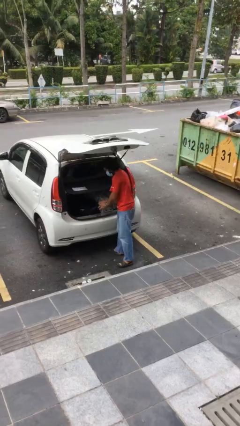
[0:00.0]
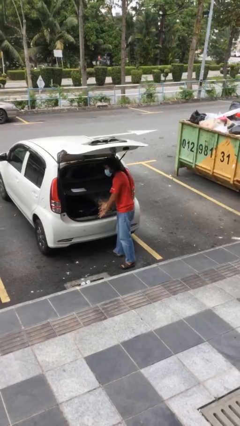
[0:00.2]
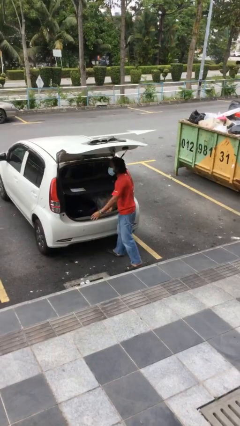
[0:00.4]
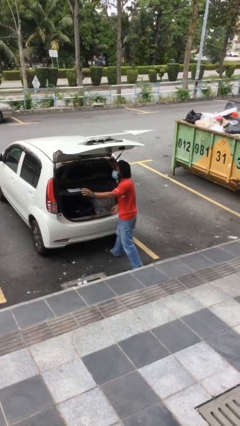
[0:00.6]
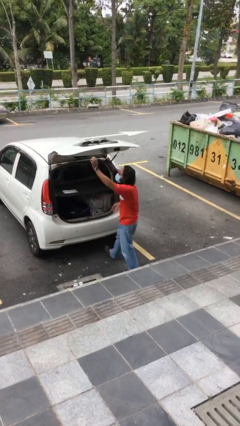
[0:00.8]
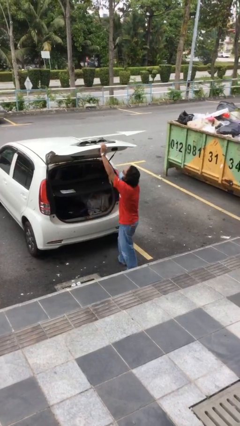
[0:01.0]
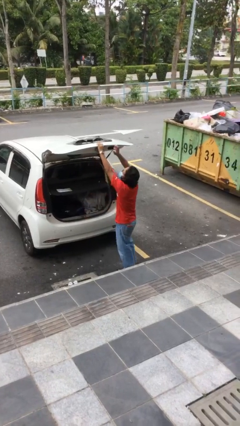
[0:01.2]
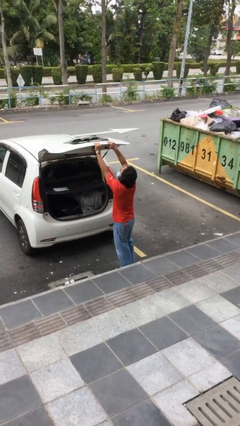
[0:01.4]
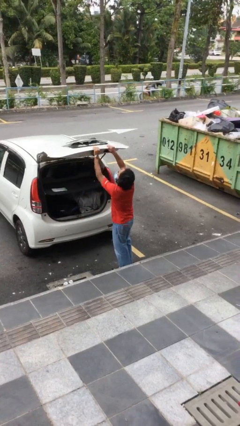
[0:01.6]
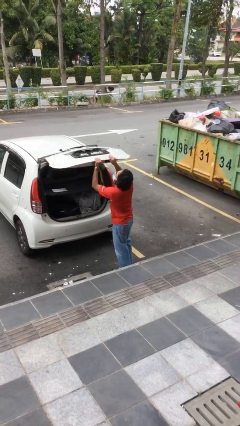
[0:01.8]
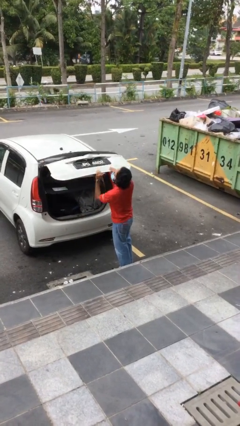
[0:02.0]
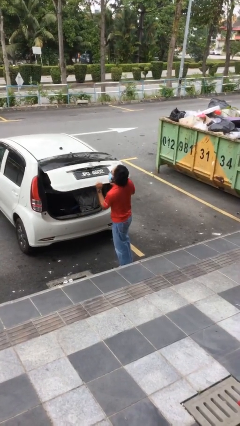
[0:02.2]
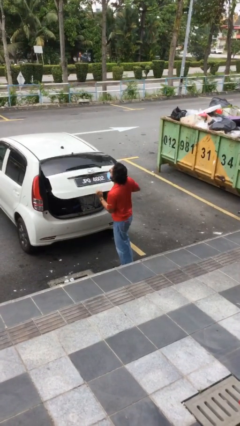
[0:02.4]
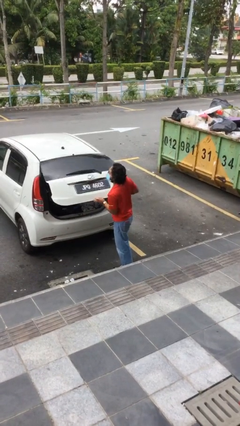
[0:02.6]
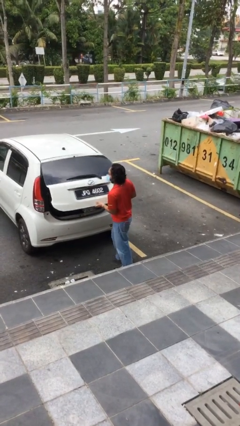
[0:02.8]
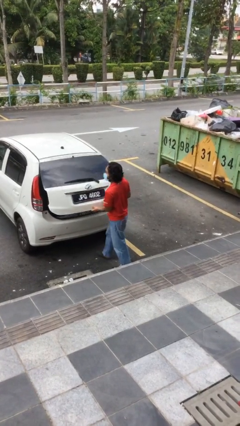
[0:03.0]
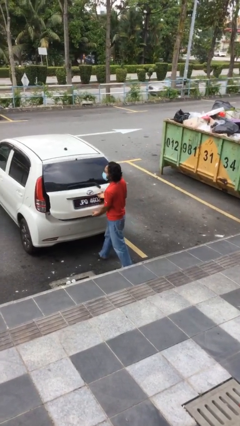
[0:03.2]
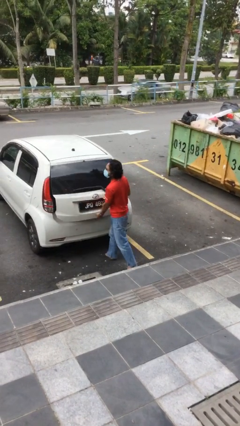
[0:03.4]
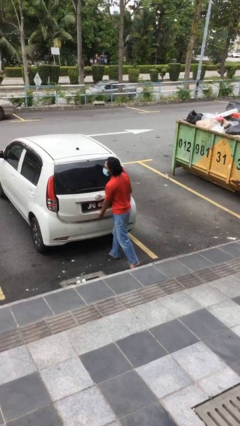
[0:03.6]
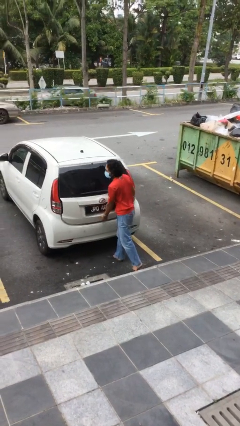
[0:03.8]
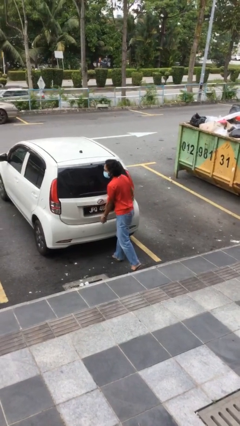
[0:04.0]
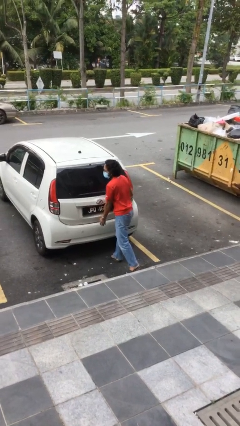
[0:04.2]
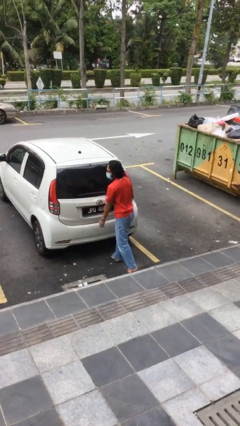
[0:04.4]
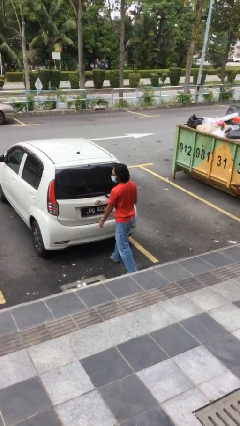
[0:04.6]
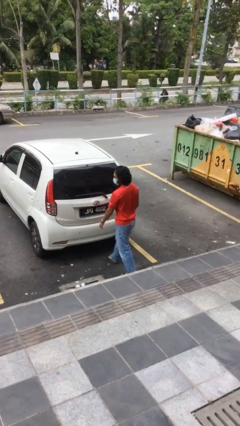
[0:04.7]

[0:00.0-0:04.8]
person closes car trunk

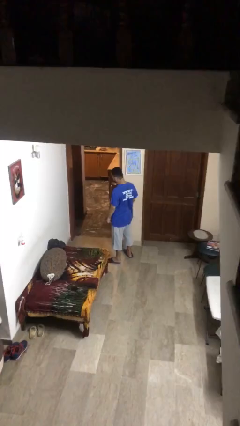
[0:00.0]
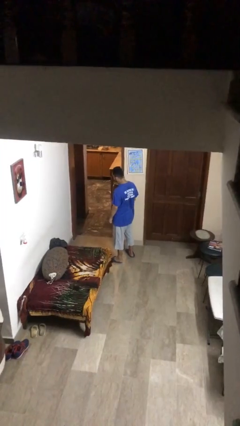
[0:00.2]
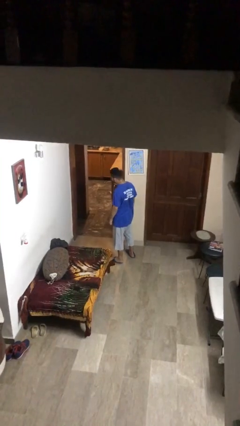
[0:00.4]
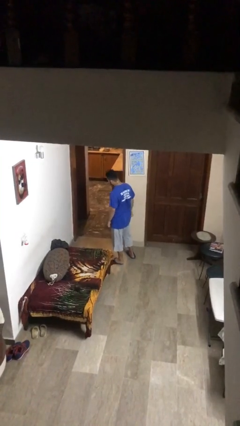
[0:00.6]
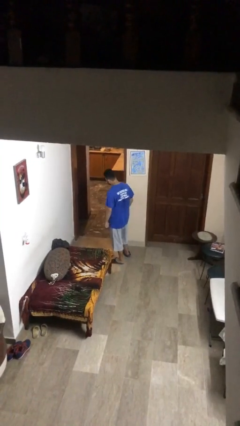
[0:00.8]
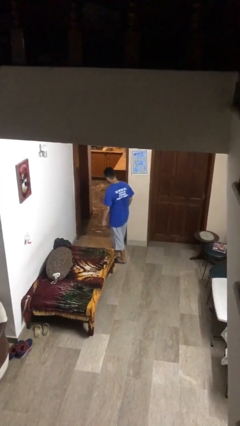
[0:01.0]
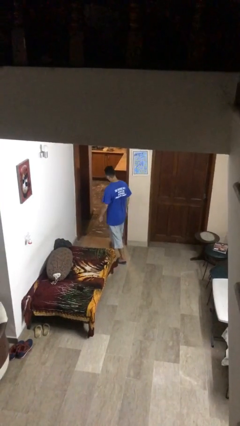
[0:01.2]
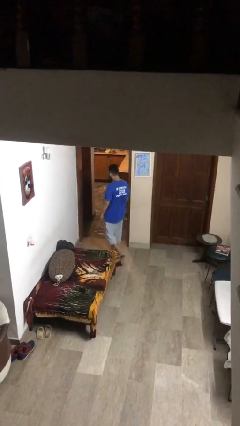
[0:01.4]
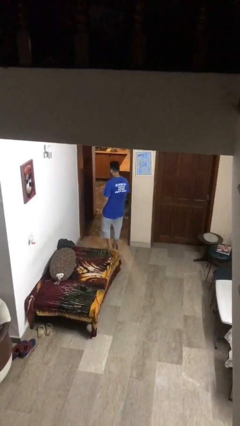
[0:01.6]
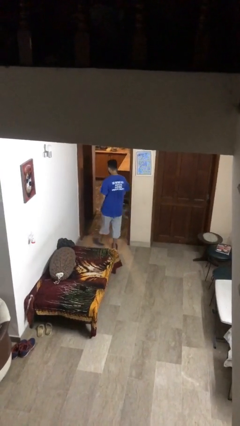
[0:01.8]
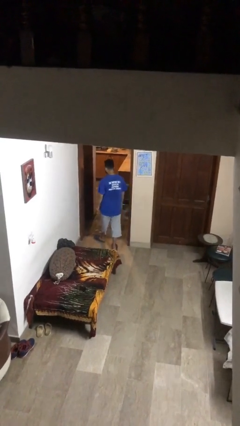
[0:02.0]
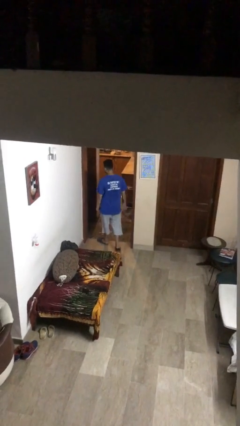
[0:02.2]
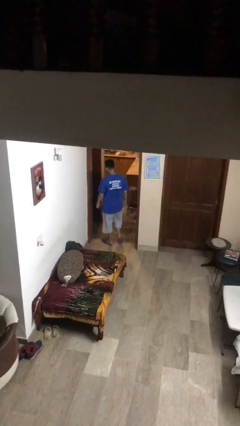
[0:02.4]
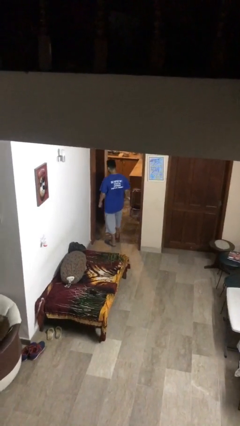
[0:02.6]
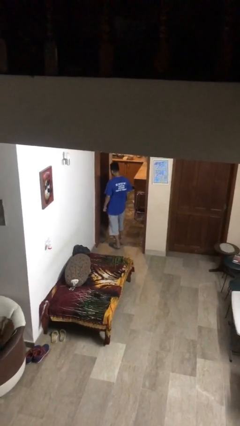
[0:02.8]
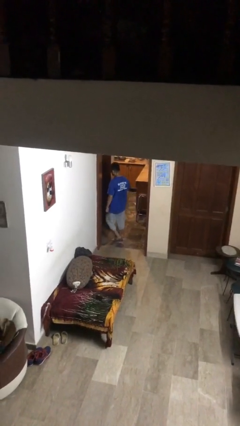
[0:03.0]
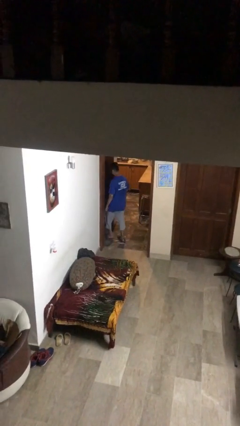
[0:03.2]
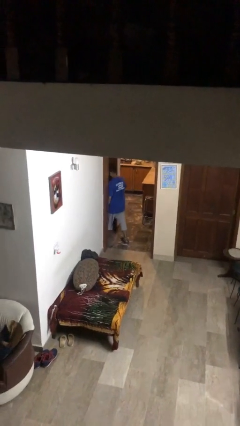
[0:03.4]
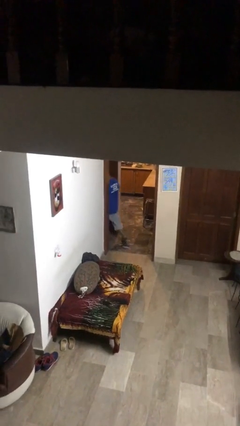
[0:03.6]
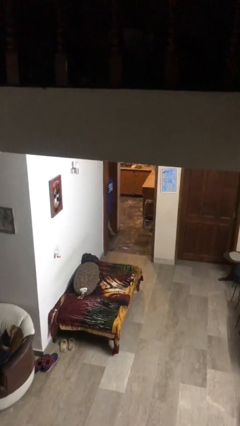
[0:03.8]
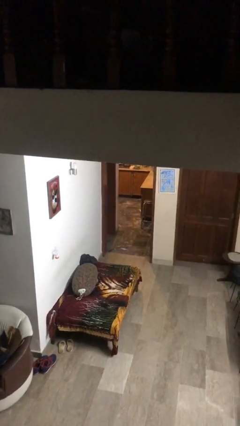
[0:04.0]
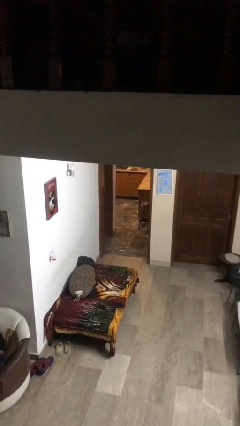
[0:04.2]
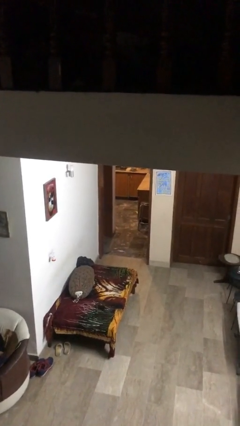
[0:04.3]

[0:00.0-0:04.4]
person exits scene through structure

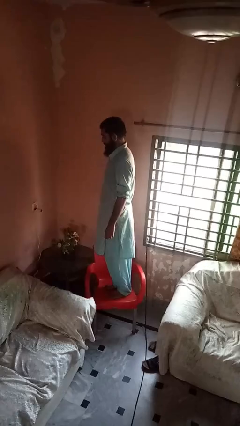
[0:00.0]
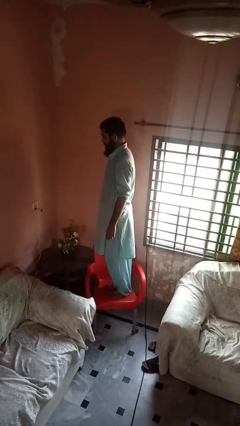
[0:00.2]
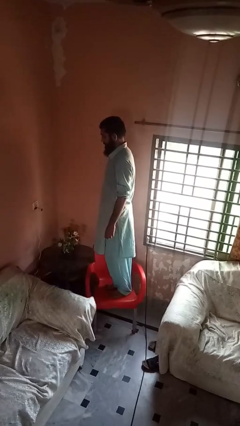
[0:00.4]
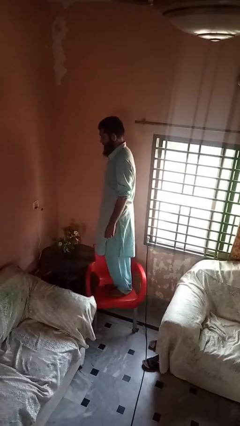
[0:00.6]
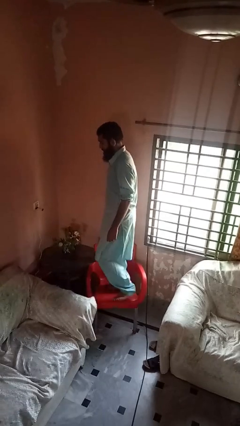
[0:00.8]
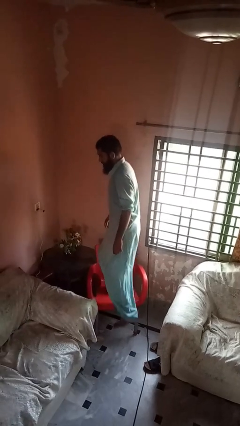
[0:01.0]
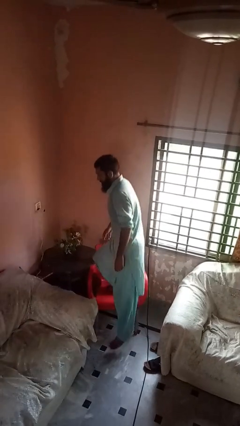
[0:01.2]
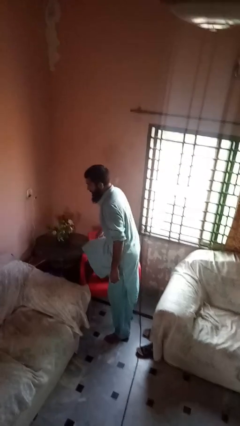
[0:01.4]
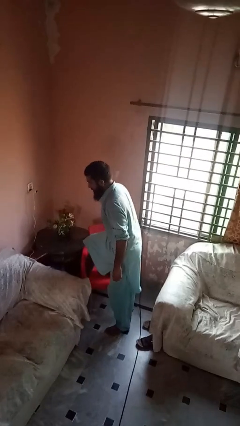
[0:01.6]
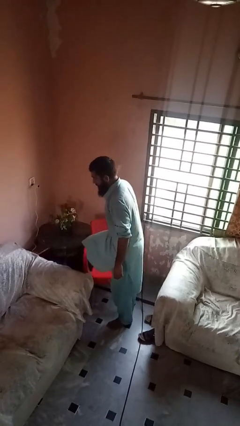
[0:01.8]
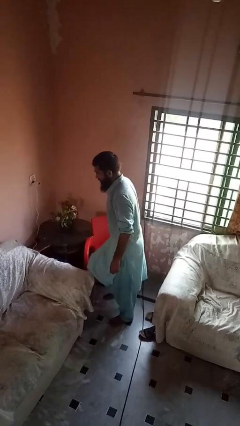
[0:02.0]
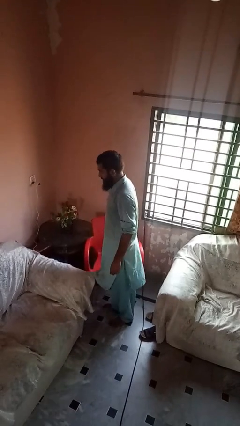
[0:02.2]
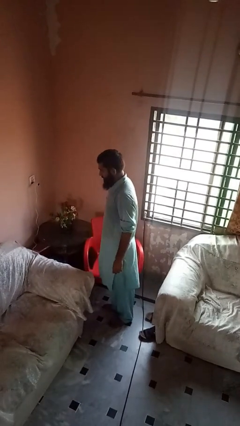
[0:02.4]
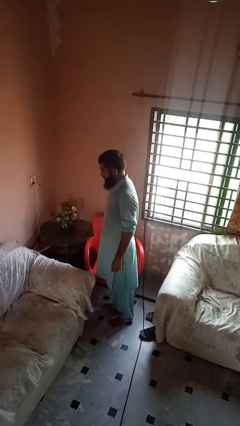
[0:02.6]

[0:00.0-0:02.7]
person climbs off chair

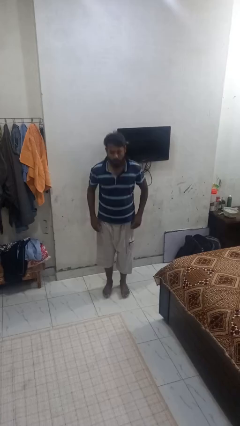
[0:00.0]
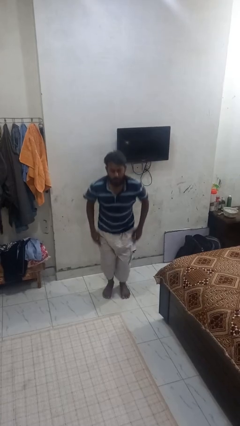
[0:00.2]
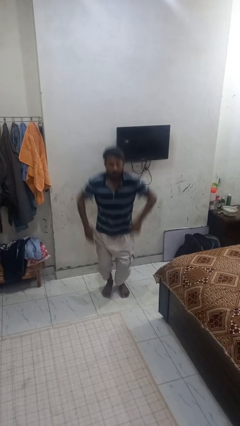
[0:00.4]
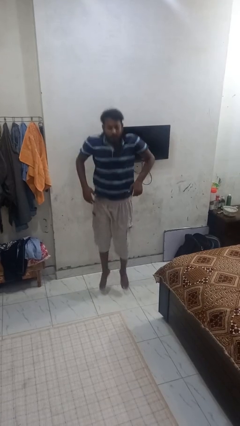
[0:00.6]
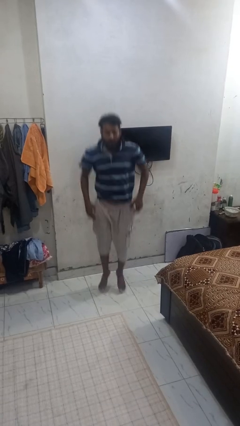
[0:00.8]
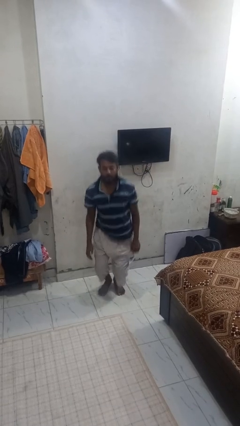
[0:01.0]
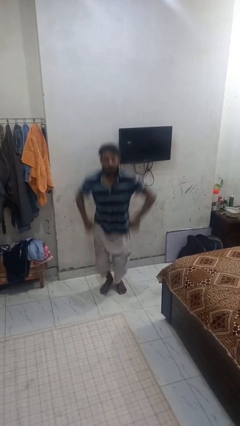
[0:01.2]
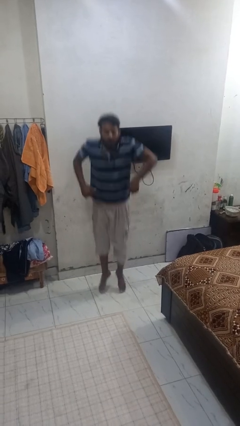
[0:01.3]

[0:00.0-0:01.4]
person jumps

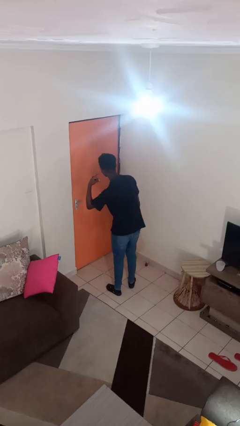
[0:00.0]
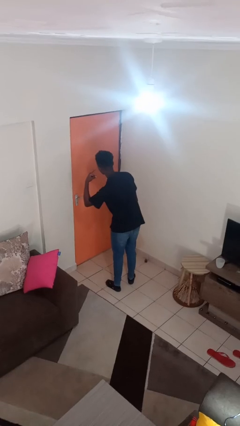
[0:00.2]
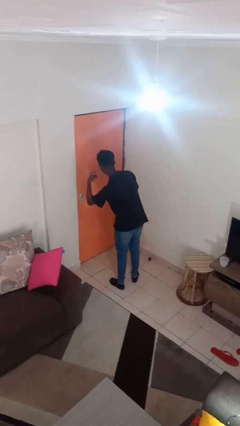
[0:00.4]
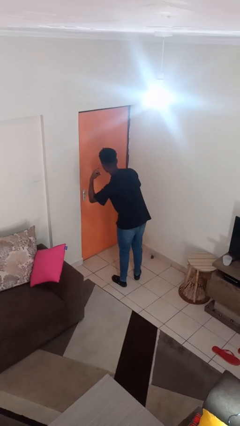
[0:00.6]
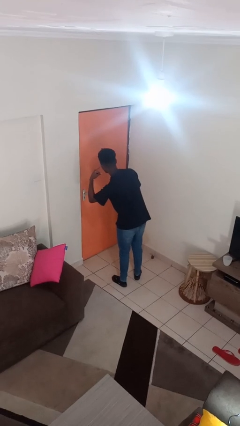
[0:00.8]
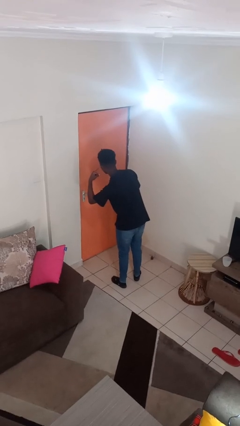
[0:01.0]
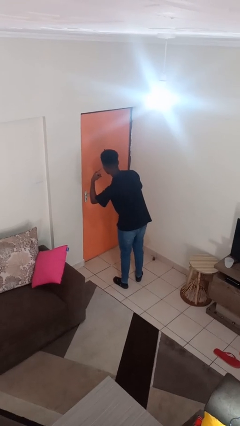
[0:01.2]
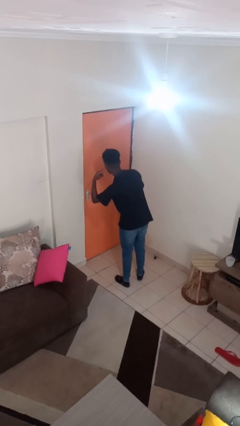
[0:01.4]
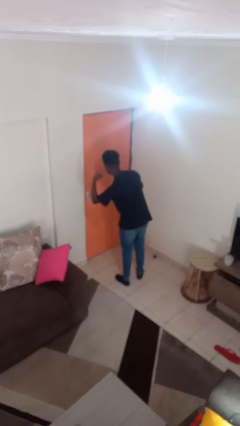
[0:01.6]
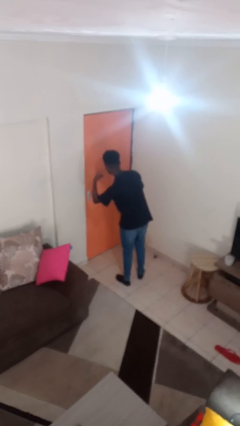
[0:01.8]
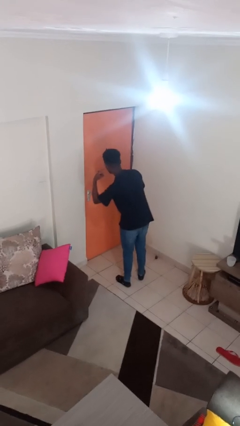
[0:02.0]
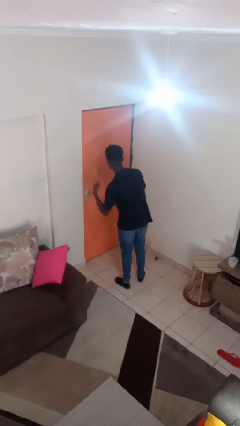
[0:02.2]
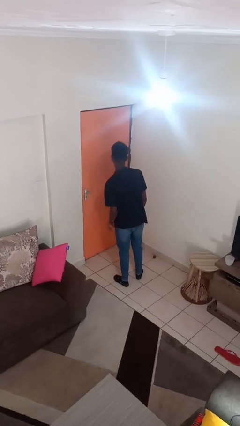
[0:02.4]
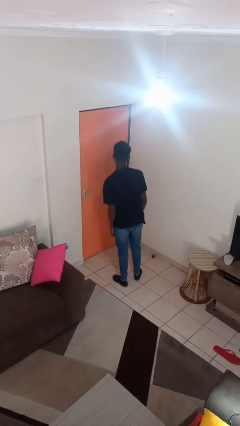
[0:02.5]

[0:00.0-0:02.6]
person gestures listen closely

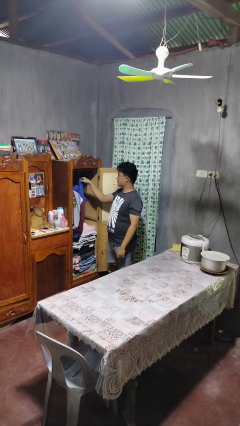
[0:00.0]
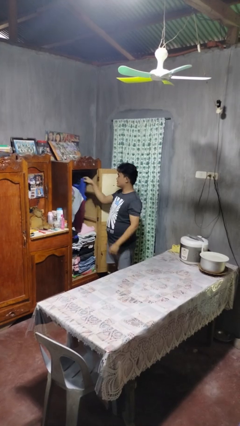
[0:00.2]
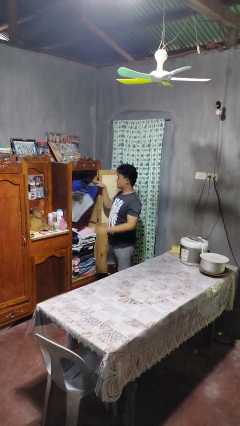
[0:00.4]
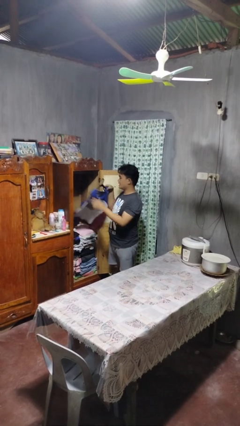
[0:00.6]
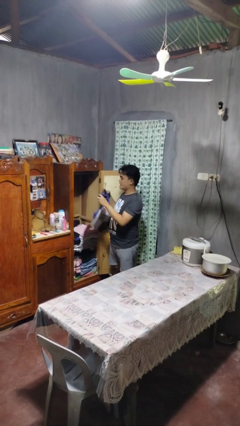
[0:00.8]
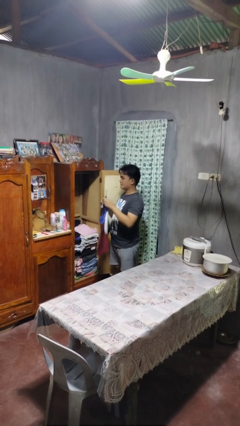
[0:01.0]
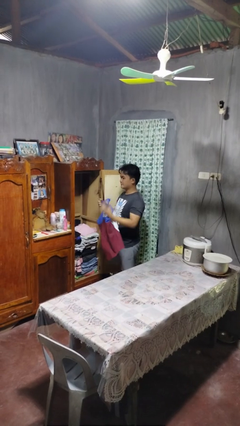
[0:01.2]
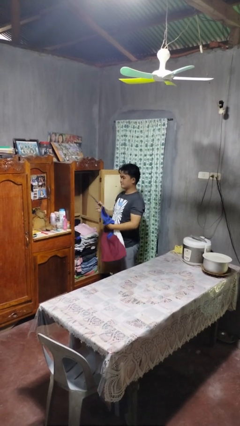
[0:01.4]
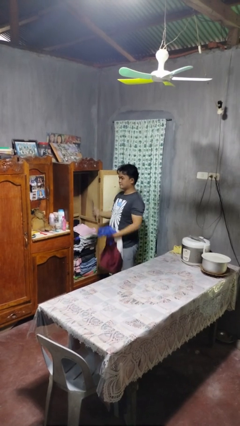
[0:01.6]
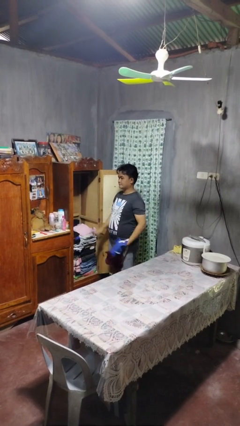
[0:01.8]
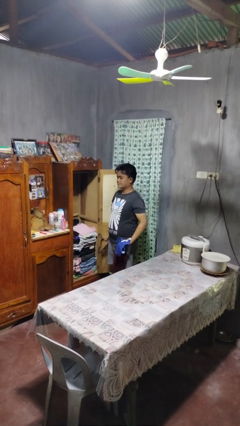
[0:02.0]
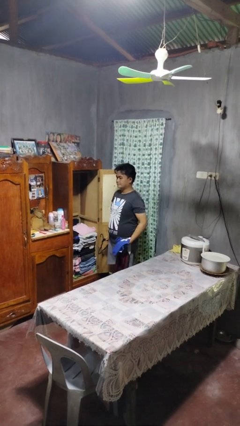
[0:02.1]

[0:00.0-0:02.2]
person takes clothes from closet
